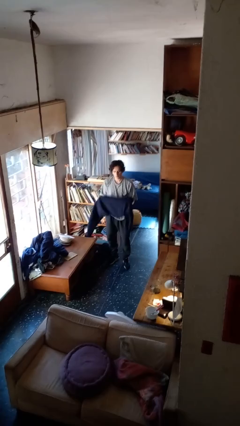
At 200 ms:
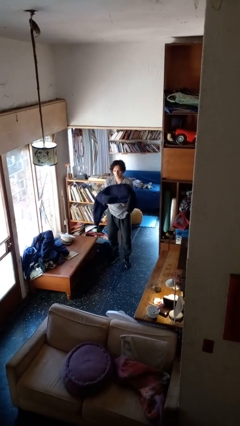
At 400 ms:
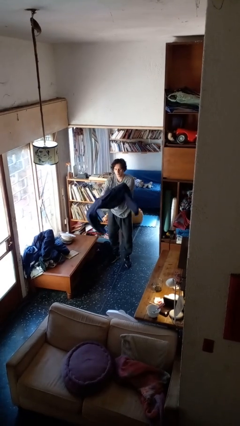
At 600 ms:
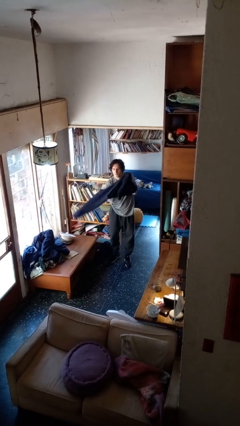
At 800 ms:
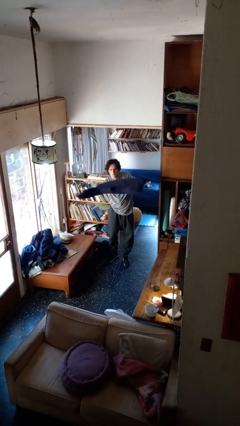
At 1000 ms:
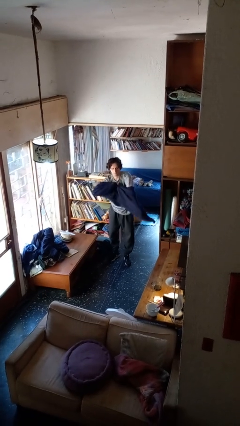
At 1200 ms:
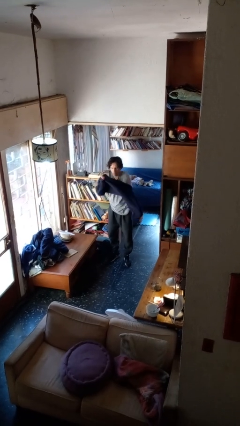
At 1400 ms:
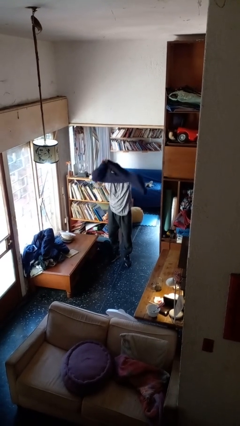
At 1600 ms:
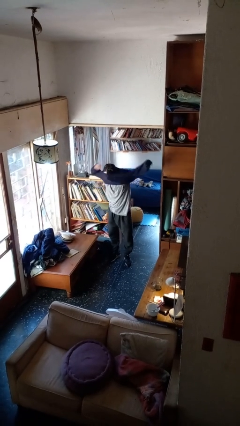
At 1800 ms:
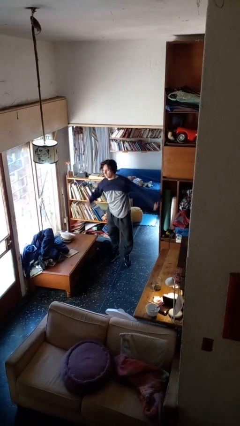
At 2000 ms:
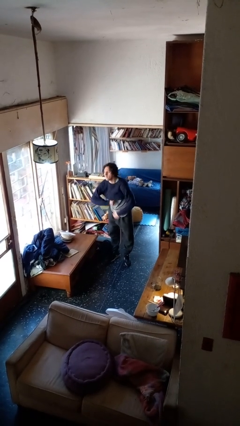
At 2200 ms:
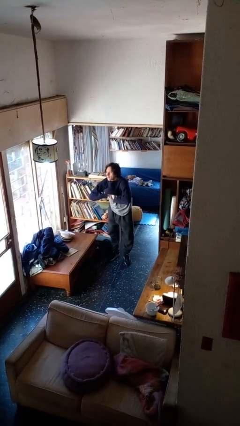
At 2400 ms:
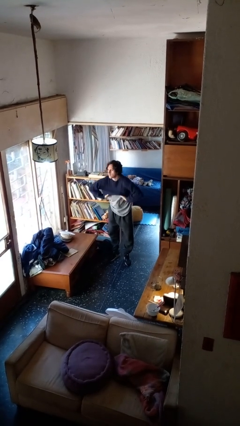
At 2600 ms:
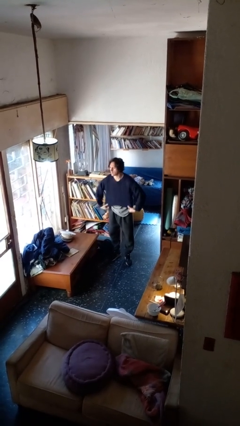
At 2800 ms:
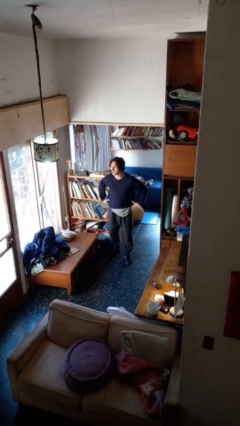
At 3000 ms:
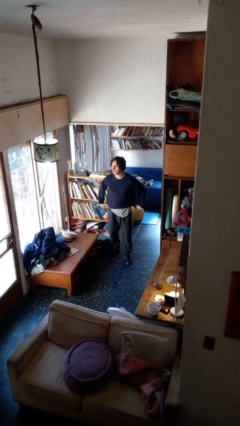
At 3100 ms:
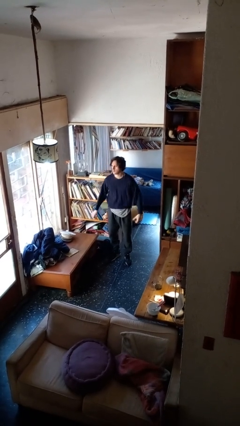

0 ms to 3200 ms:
person puts on shirt

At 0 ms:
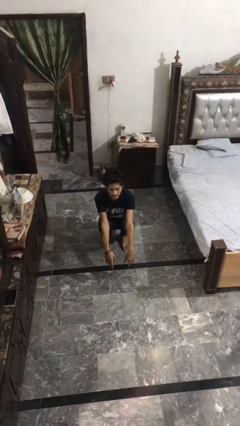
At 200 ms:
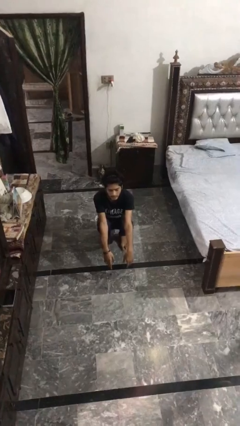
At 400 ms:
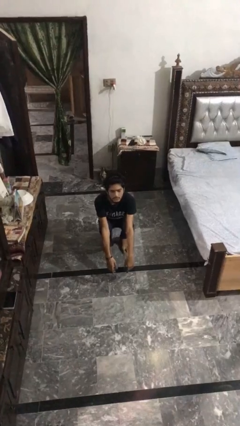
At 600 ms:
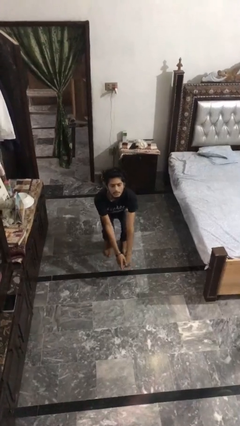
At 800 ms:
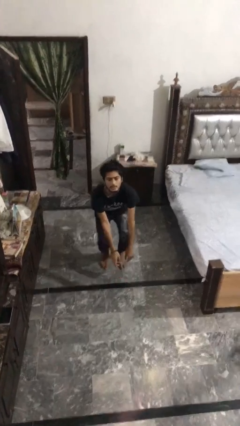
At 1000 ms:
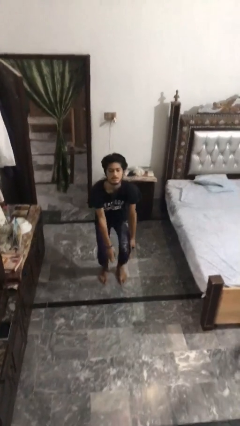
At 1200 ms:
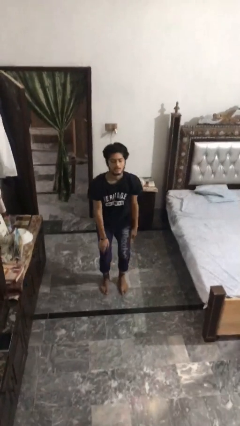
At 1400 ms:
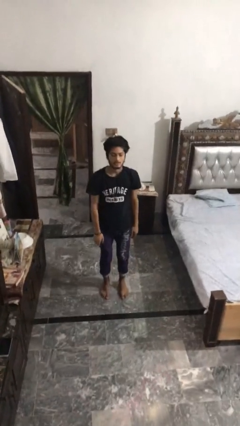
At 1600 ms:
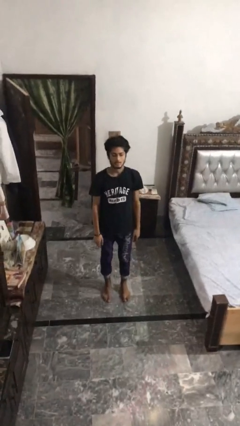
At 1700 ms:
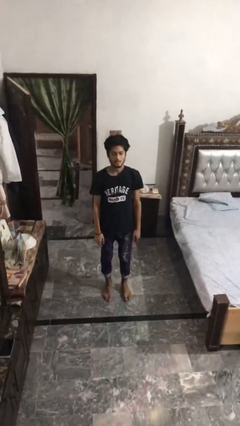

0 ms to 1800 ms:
person stands up

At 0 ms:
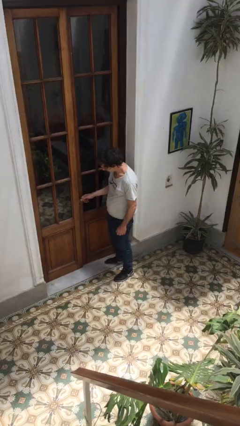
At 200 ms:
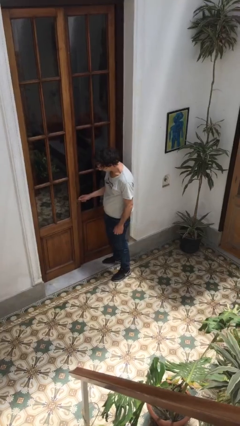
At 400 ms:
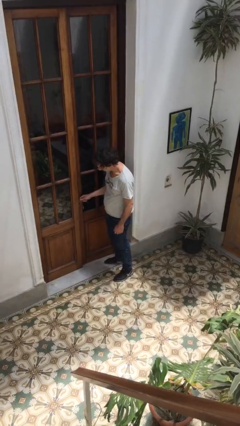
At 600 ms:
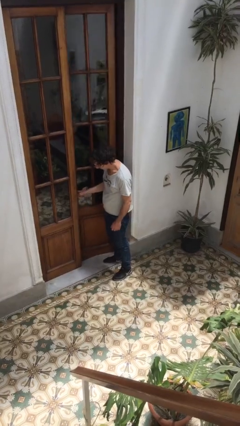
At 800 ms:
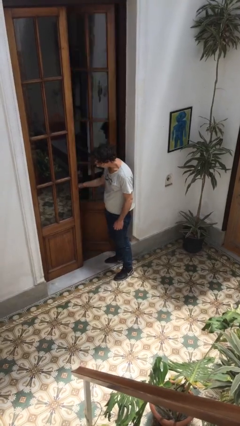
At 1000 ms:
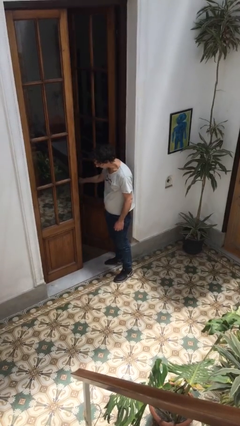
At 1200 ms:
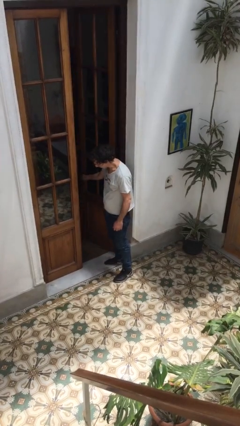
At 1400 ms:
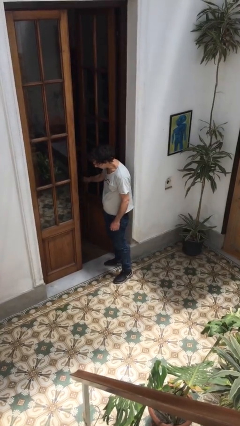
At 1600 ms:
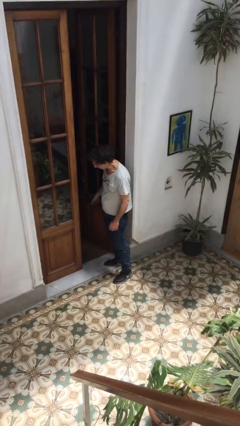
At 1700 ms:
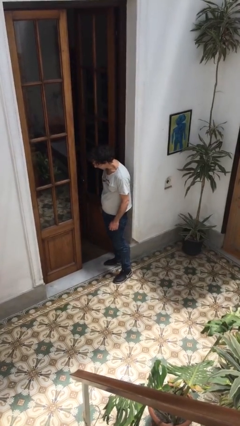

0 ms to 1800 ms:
person opens facility door

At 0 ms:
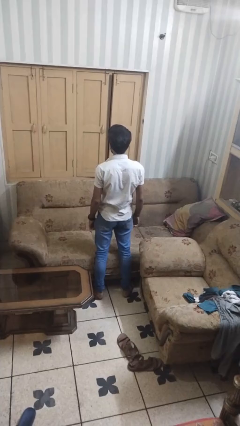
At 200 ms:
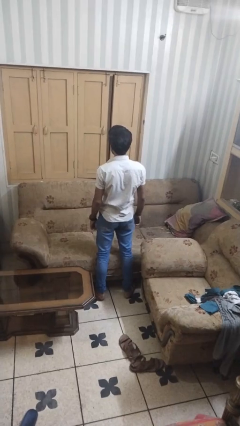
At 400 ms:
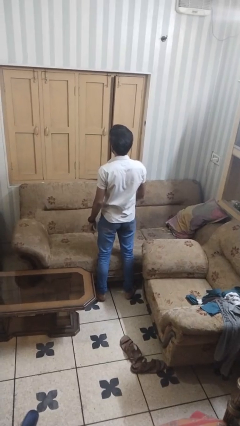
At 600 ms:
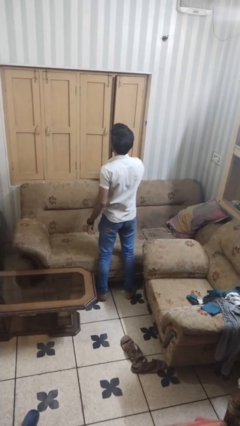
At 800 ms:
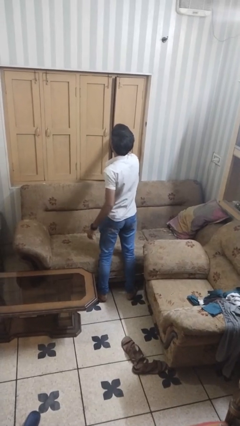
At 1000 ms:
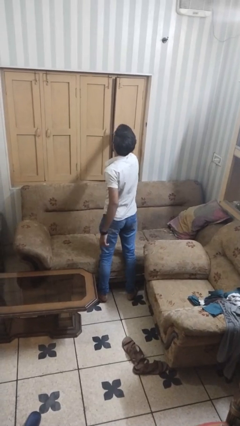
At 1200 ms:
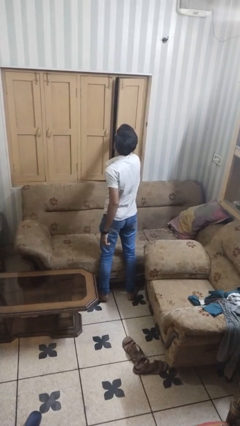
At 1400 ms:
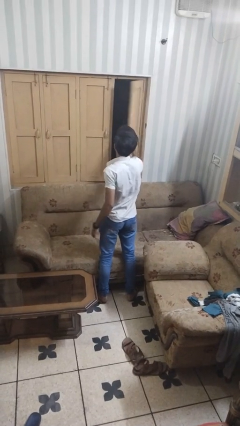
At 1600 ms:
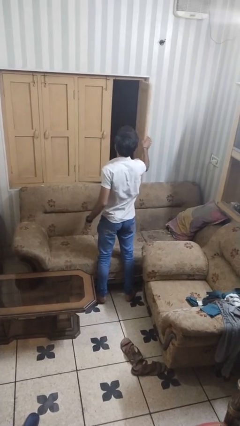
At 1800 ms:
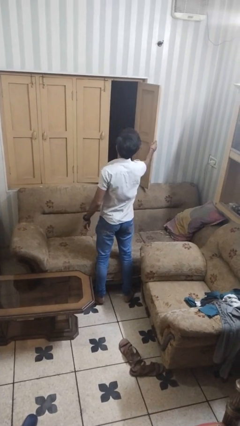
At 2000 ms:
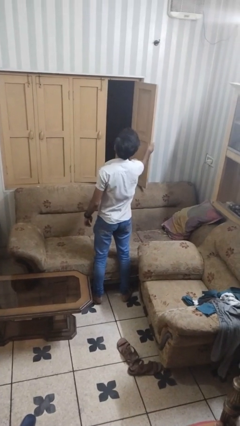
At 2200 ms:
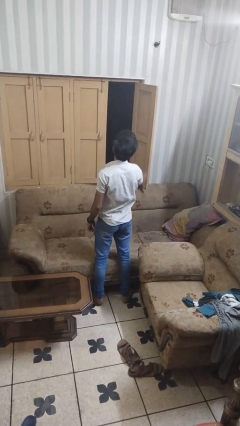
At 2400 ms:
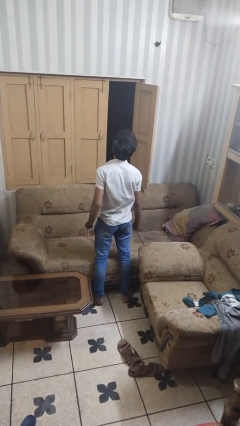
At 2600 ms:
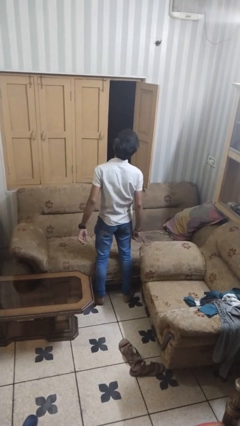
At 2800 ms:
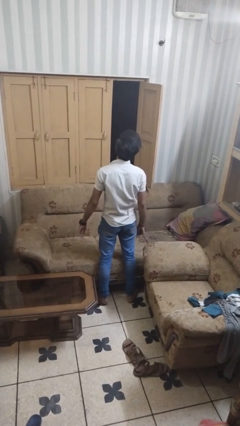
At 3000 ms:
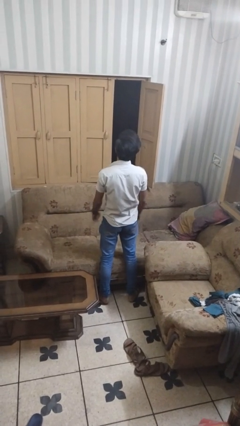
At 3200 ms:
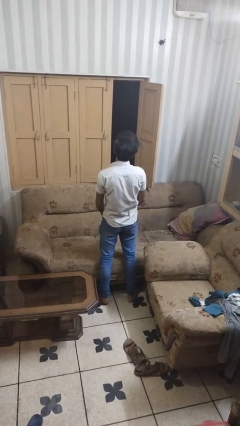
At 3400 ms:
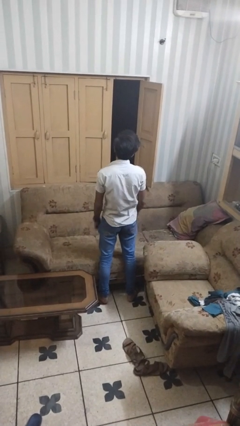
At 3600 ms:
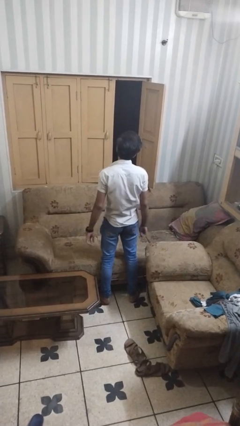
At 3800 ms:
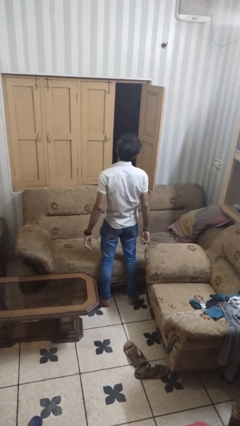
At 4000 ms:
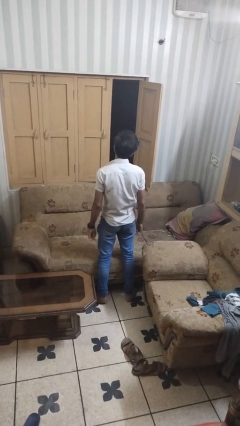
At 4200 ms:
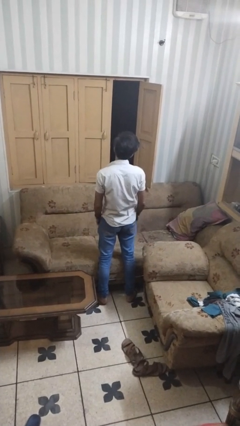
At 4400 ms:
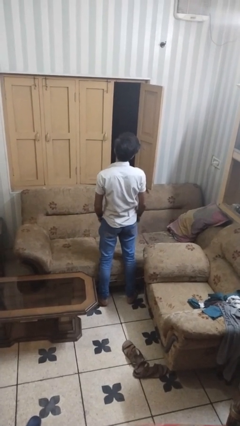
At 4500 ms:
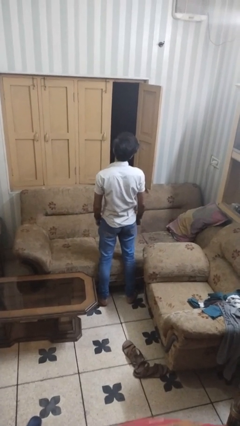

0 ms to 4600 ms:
person opens home window

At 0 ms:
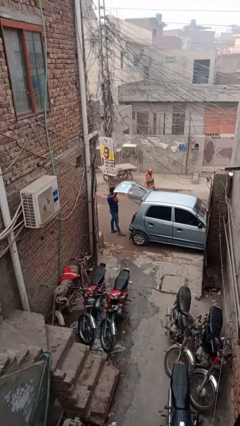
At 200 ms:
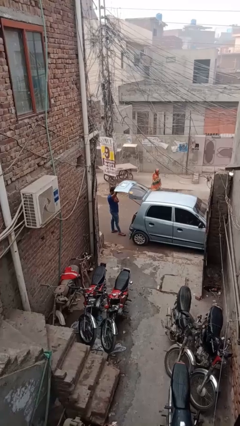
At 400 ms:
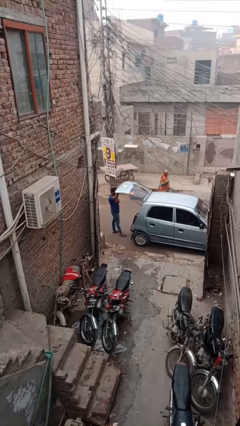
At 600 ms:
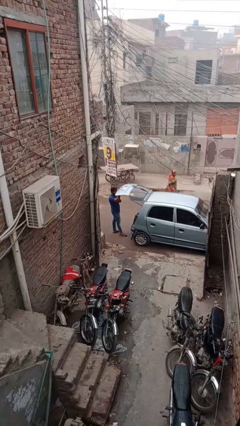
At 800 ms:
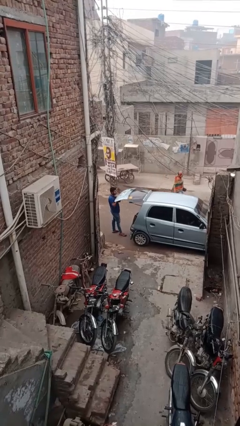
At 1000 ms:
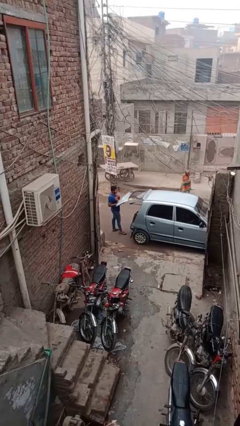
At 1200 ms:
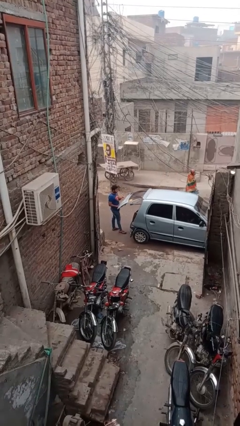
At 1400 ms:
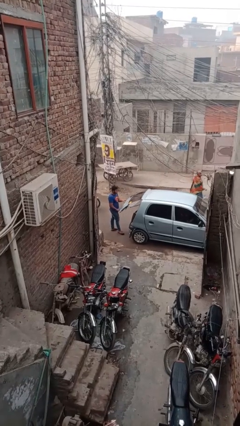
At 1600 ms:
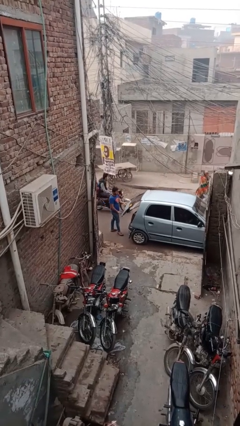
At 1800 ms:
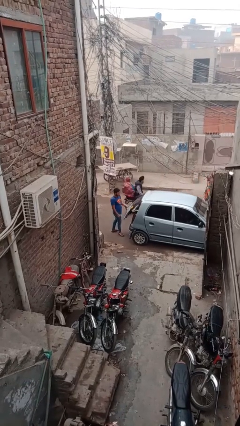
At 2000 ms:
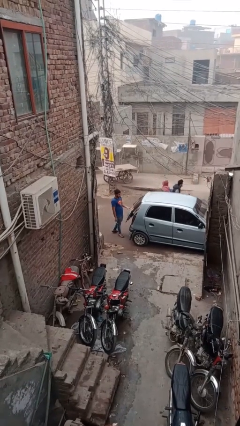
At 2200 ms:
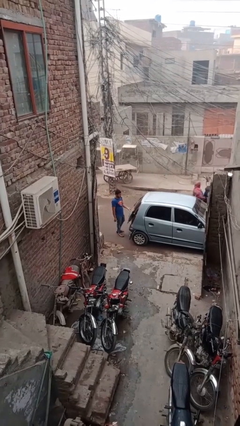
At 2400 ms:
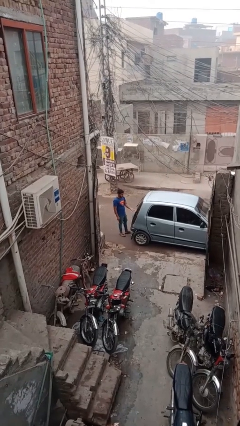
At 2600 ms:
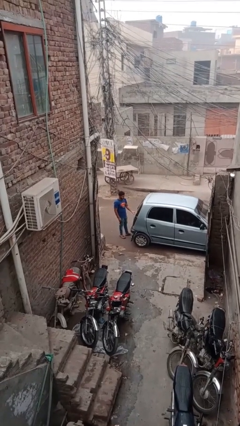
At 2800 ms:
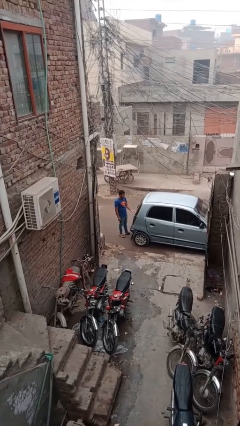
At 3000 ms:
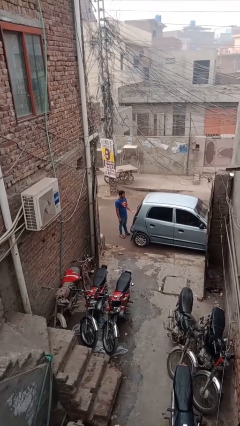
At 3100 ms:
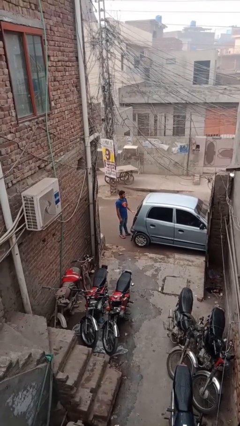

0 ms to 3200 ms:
person closes car trunk

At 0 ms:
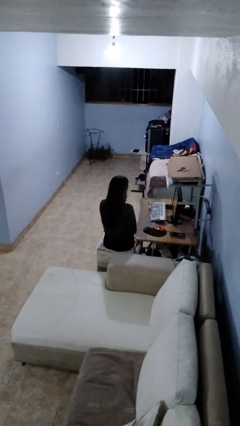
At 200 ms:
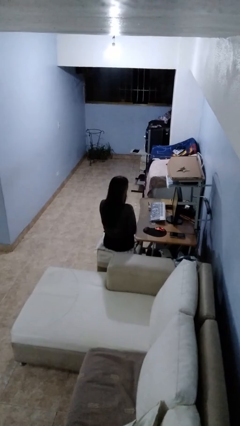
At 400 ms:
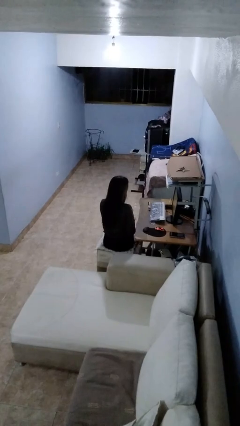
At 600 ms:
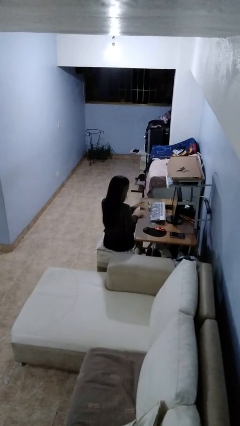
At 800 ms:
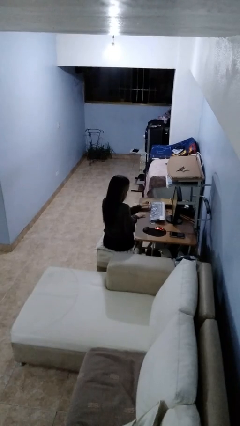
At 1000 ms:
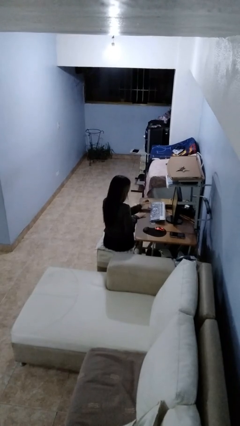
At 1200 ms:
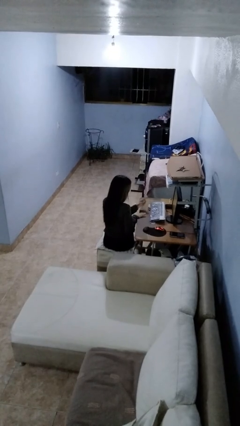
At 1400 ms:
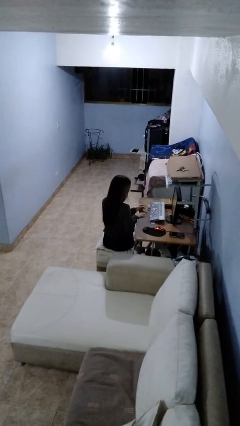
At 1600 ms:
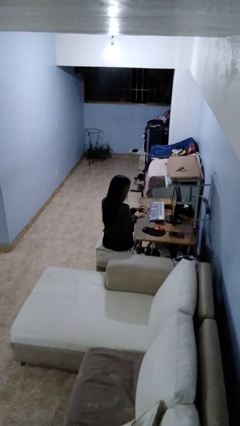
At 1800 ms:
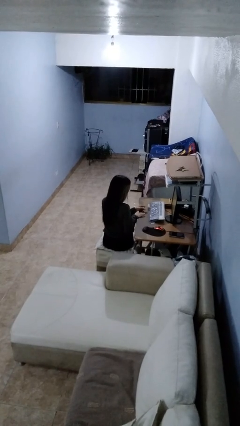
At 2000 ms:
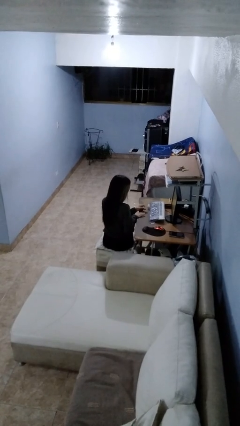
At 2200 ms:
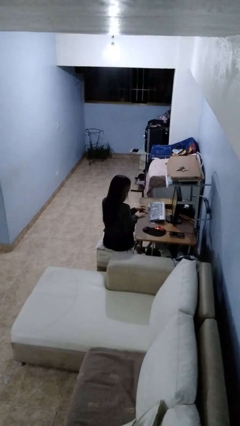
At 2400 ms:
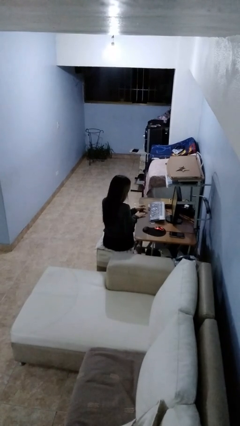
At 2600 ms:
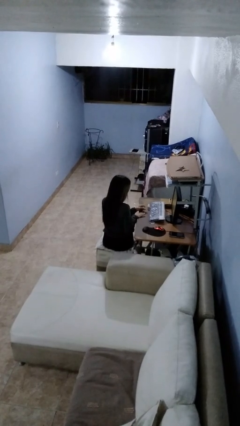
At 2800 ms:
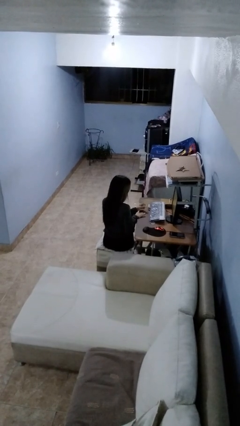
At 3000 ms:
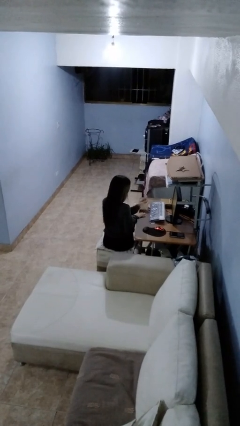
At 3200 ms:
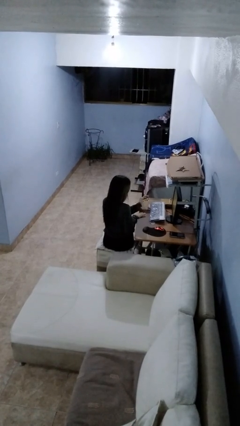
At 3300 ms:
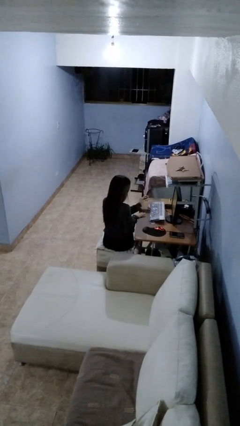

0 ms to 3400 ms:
person paints fingernails
